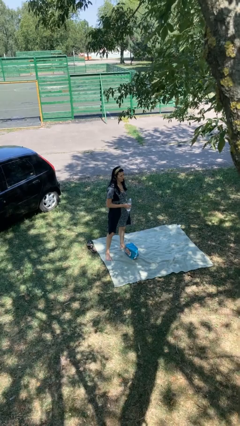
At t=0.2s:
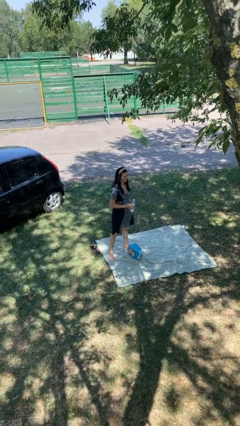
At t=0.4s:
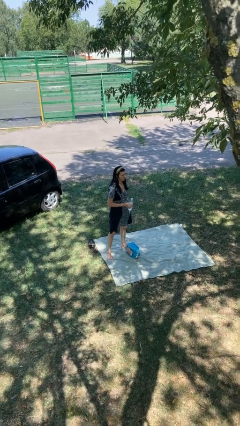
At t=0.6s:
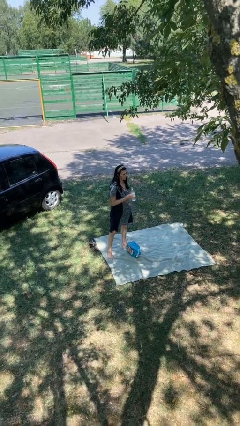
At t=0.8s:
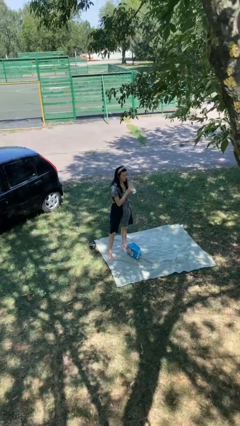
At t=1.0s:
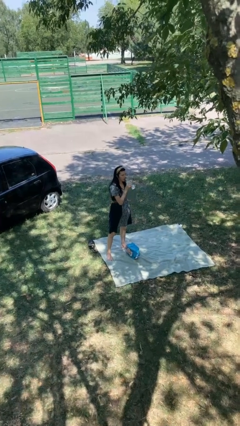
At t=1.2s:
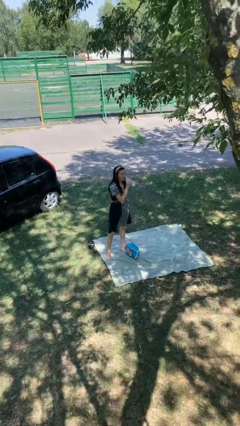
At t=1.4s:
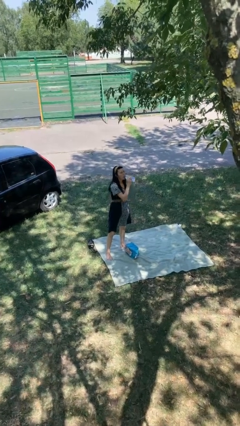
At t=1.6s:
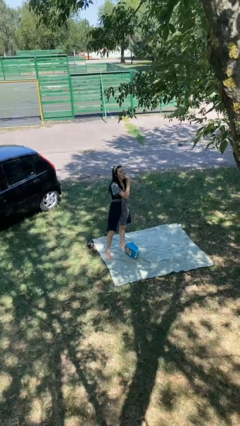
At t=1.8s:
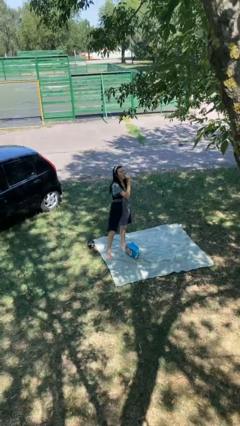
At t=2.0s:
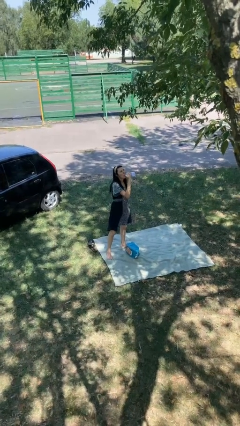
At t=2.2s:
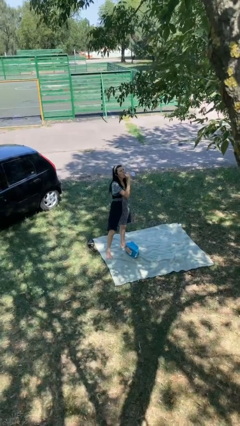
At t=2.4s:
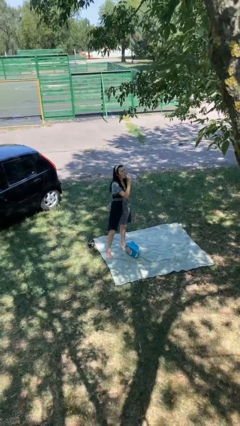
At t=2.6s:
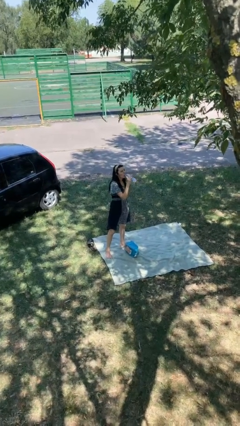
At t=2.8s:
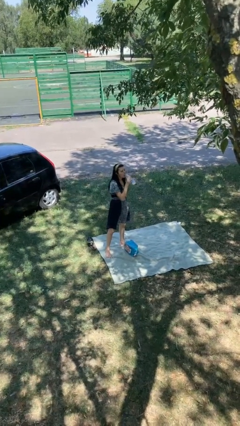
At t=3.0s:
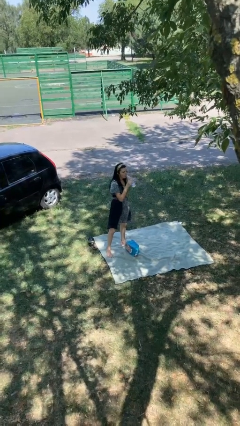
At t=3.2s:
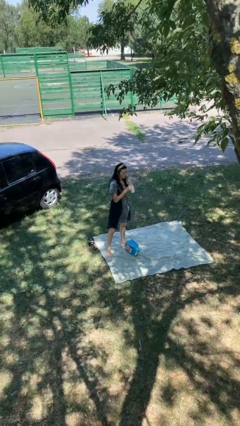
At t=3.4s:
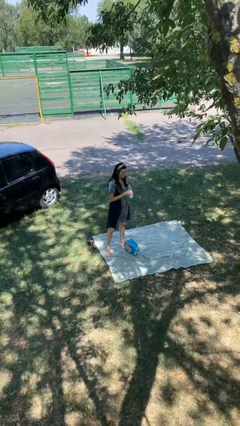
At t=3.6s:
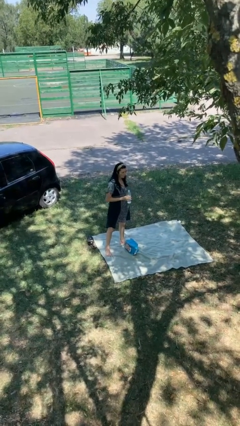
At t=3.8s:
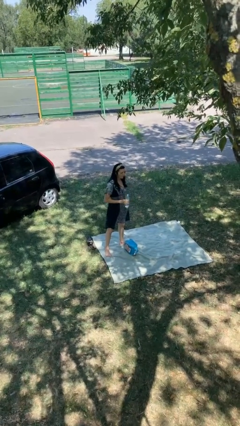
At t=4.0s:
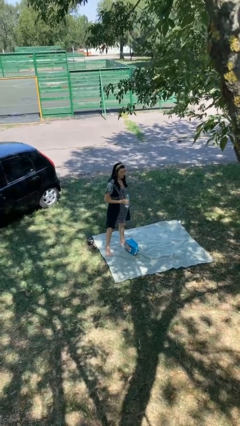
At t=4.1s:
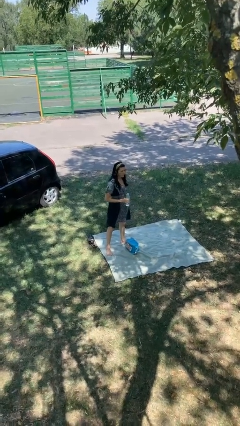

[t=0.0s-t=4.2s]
person drinks from bottle

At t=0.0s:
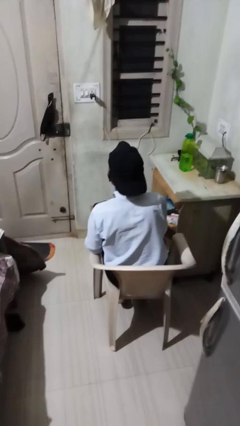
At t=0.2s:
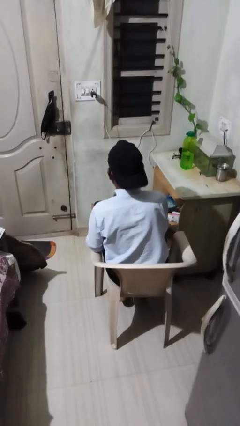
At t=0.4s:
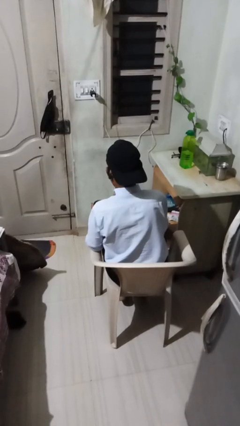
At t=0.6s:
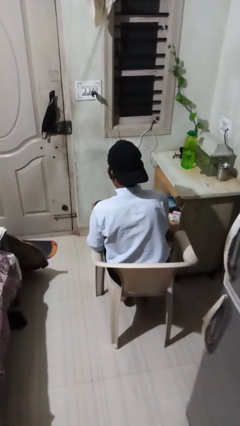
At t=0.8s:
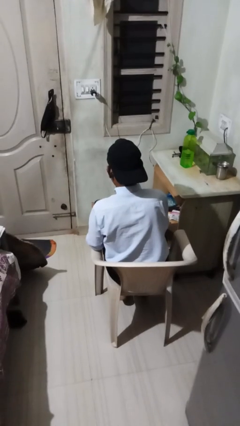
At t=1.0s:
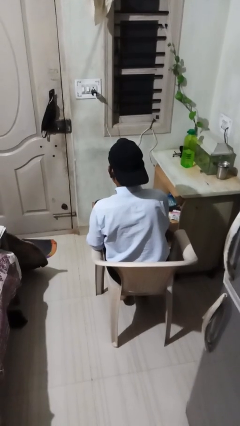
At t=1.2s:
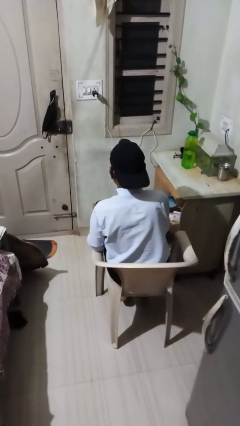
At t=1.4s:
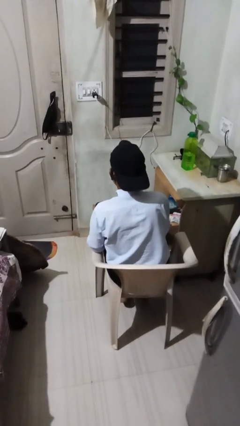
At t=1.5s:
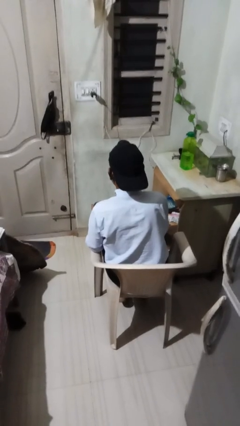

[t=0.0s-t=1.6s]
person eats with utensil

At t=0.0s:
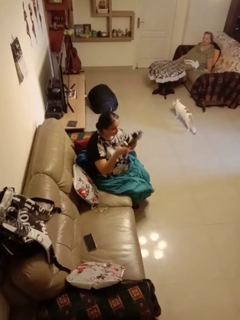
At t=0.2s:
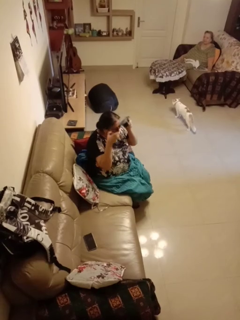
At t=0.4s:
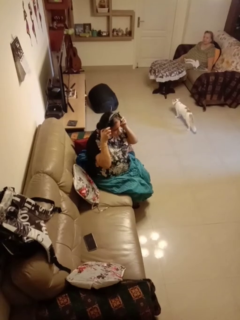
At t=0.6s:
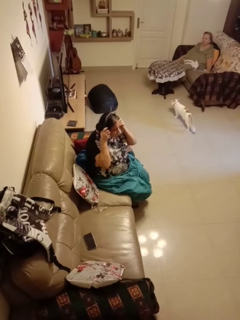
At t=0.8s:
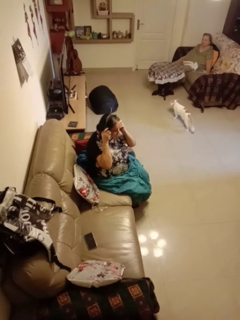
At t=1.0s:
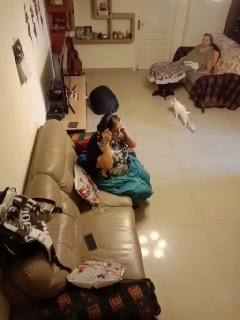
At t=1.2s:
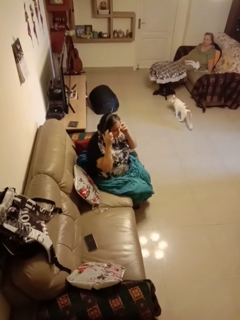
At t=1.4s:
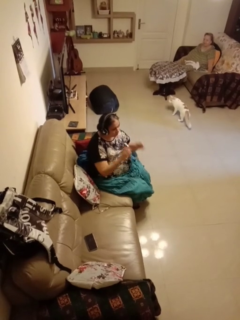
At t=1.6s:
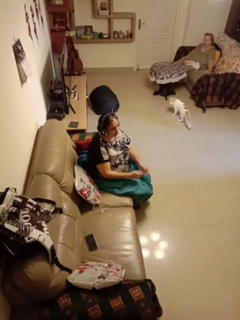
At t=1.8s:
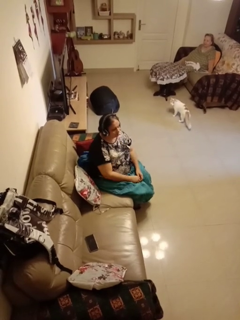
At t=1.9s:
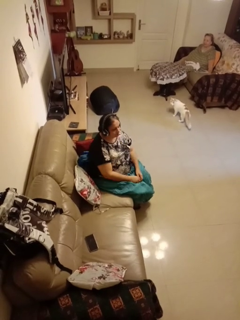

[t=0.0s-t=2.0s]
person puts on headphones

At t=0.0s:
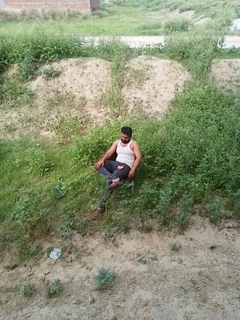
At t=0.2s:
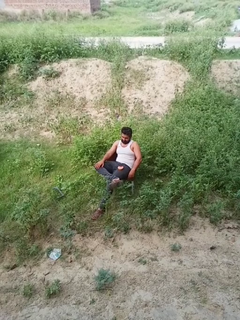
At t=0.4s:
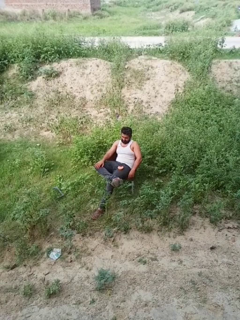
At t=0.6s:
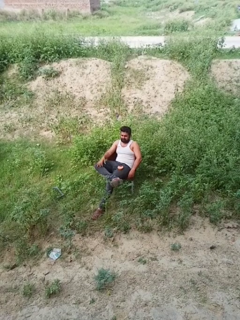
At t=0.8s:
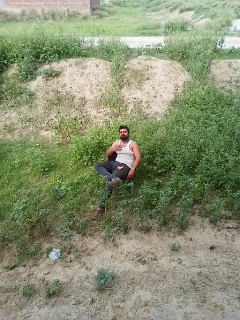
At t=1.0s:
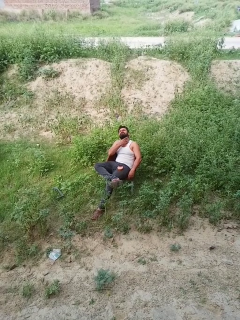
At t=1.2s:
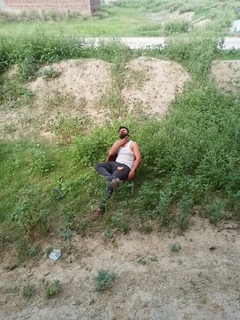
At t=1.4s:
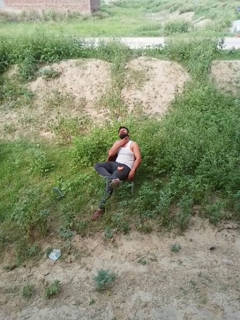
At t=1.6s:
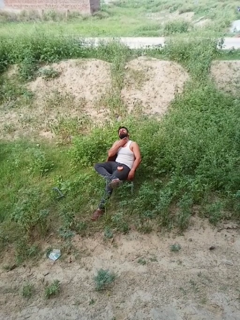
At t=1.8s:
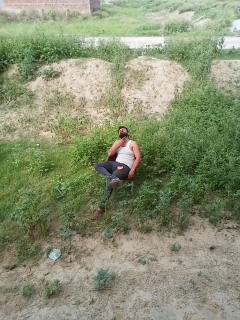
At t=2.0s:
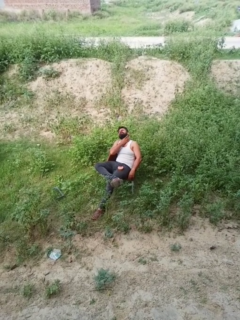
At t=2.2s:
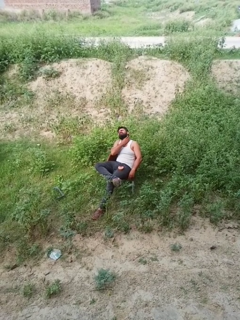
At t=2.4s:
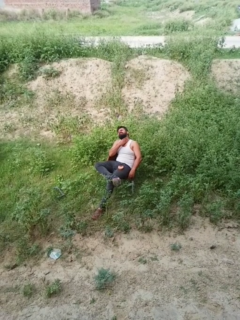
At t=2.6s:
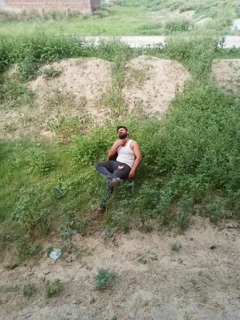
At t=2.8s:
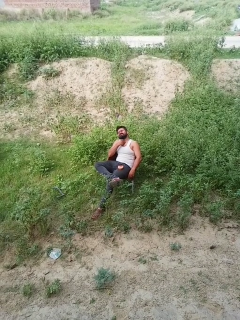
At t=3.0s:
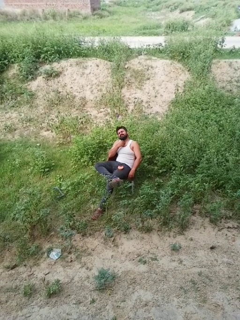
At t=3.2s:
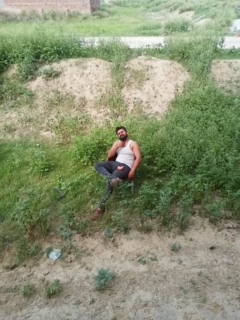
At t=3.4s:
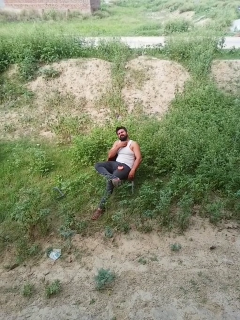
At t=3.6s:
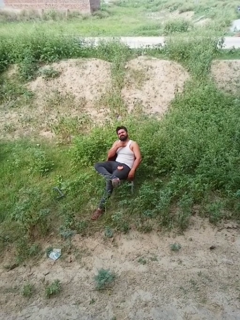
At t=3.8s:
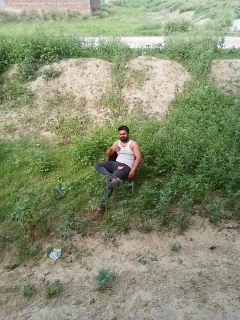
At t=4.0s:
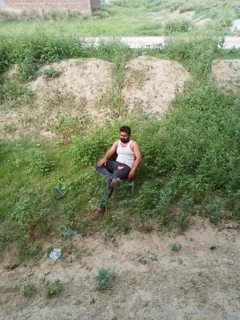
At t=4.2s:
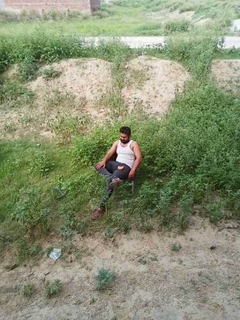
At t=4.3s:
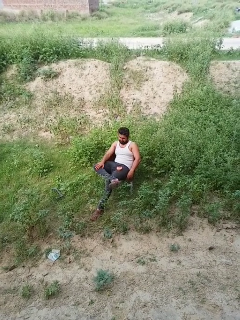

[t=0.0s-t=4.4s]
person rubs neck

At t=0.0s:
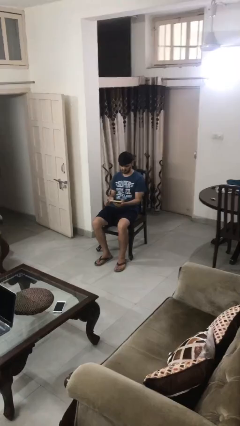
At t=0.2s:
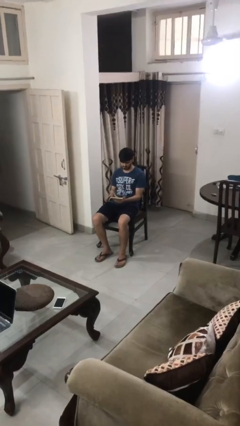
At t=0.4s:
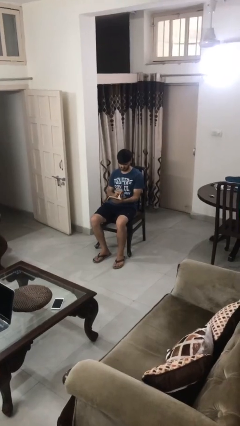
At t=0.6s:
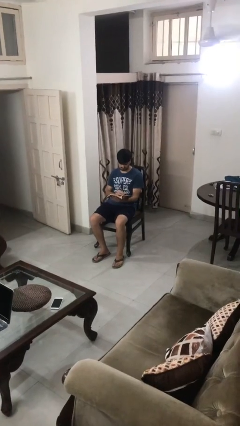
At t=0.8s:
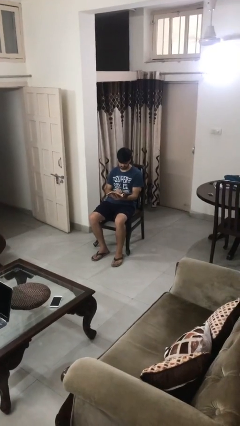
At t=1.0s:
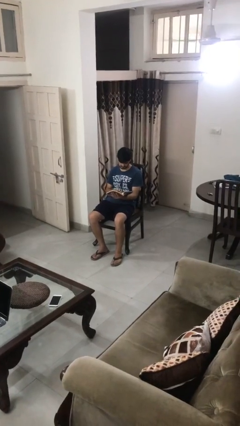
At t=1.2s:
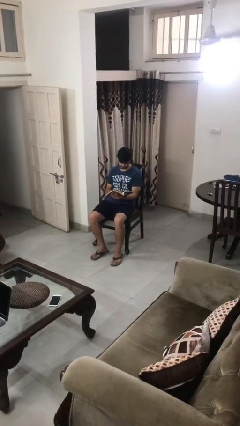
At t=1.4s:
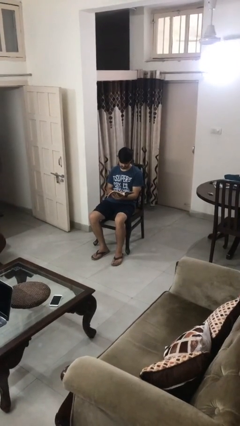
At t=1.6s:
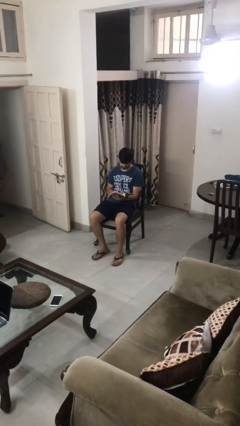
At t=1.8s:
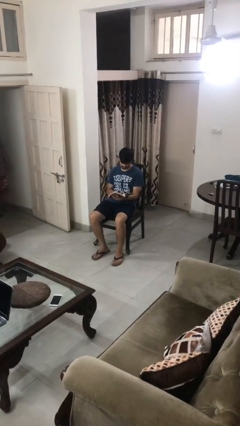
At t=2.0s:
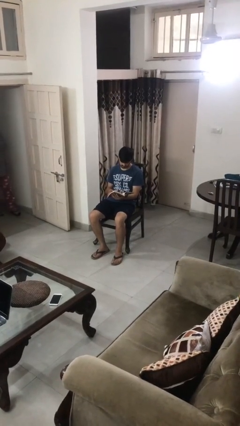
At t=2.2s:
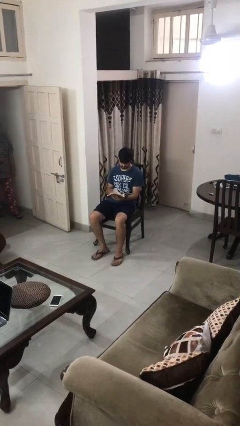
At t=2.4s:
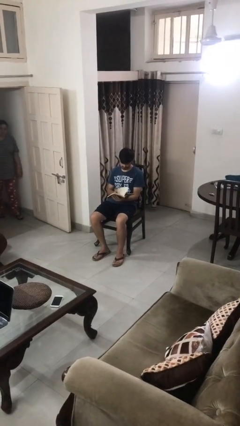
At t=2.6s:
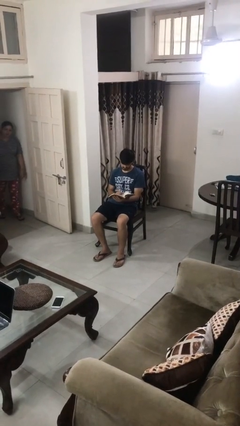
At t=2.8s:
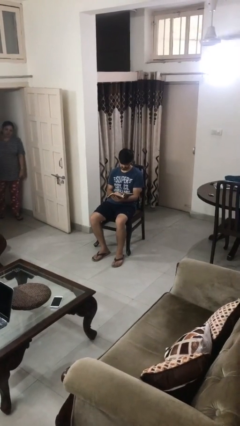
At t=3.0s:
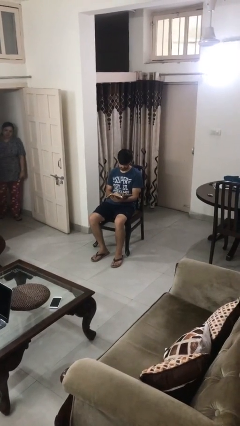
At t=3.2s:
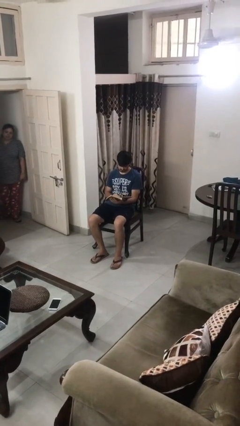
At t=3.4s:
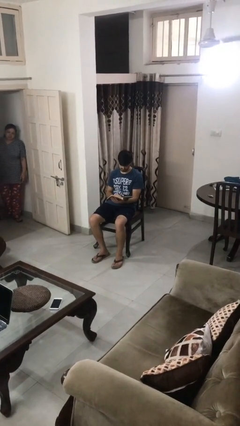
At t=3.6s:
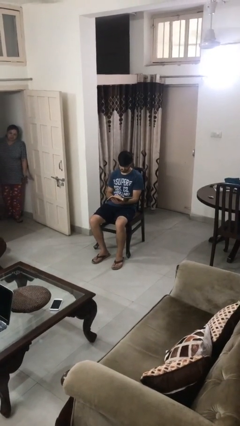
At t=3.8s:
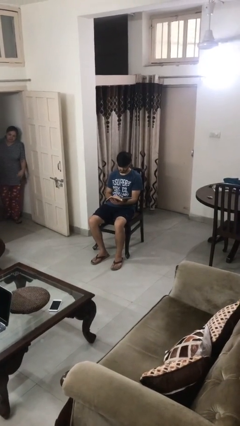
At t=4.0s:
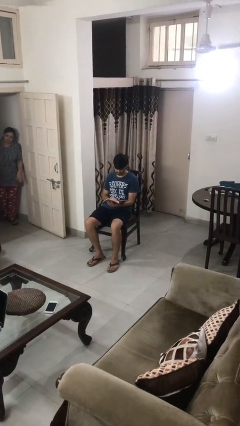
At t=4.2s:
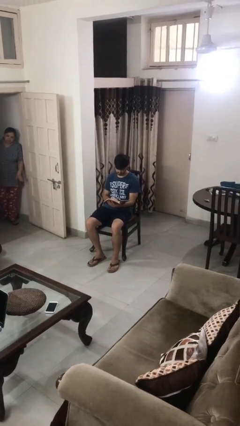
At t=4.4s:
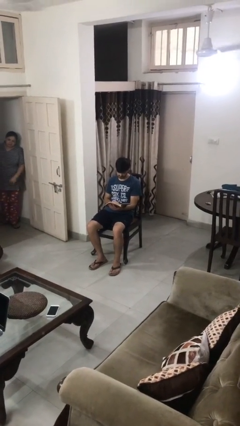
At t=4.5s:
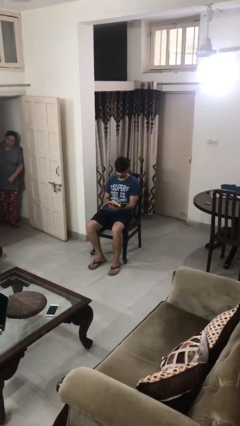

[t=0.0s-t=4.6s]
person reads book

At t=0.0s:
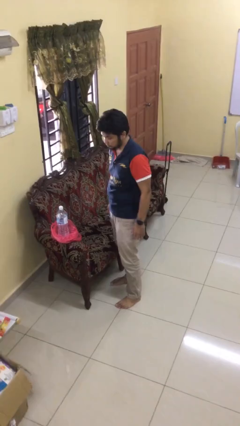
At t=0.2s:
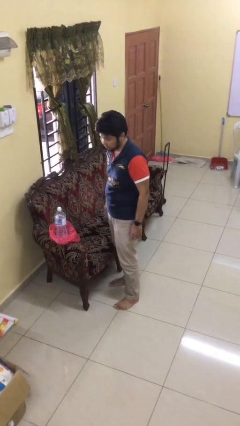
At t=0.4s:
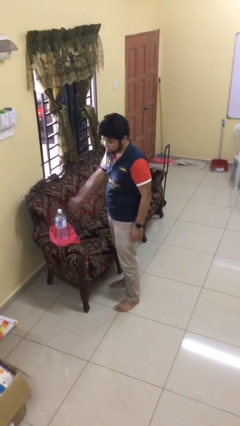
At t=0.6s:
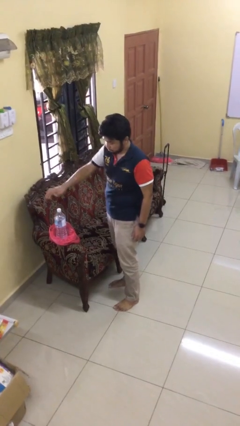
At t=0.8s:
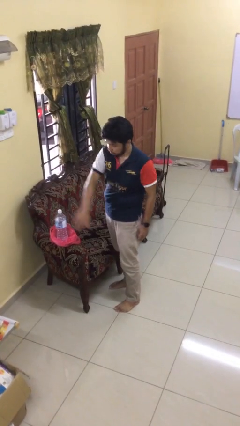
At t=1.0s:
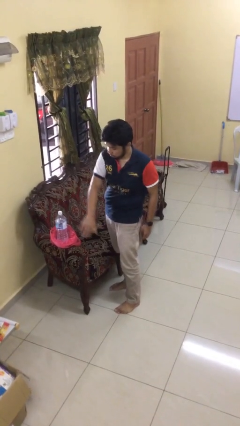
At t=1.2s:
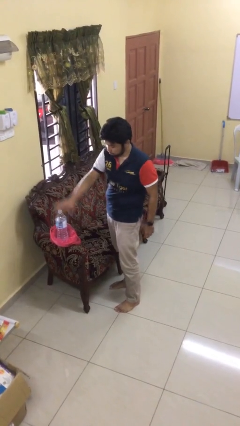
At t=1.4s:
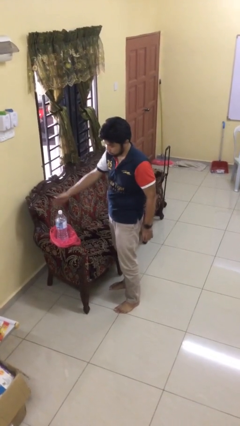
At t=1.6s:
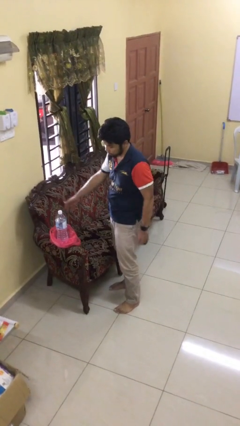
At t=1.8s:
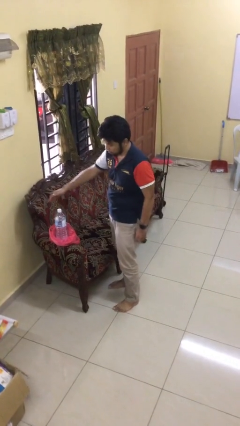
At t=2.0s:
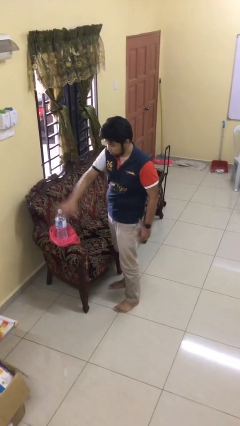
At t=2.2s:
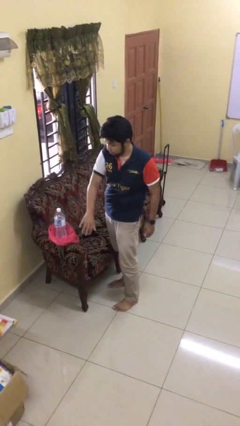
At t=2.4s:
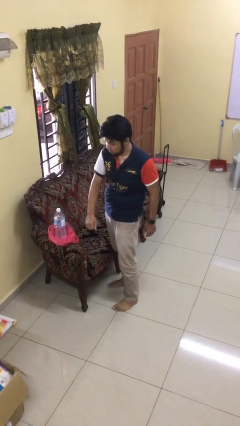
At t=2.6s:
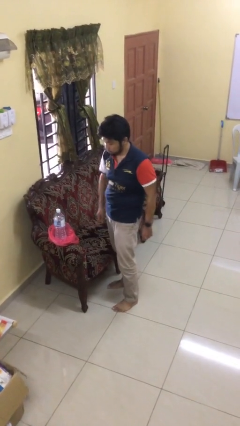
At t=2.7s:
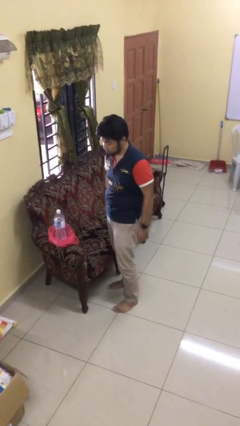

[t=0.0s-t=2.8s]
person waves hand over object
